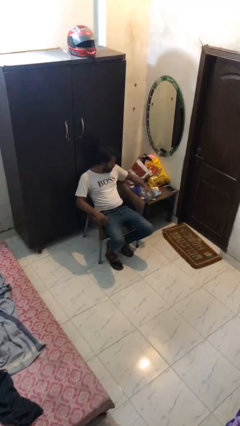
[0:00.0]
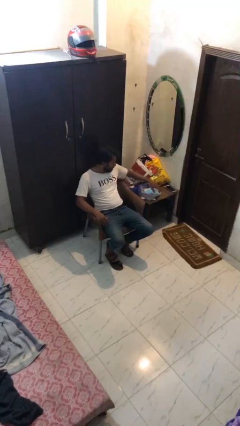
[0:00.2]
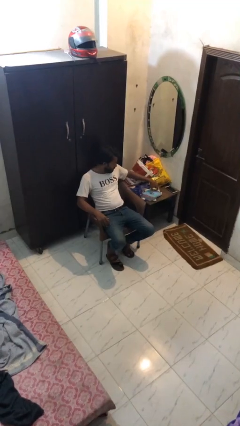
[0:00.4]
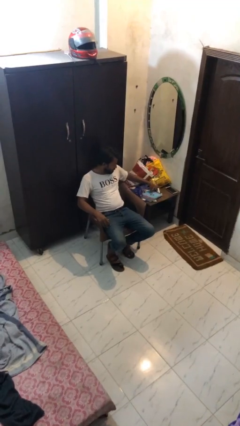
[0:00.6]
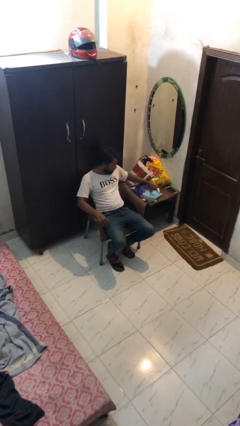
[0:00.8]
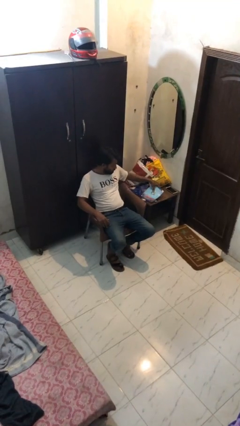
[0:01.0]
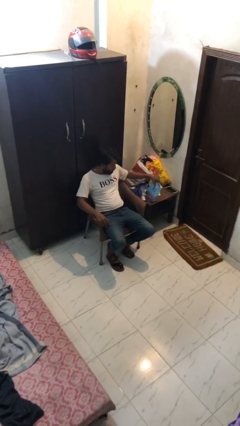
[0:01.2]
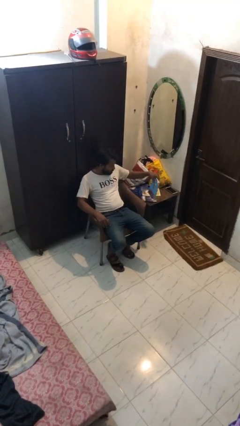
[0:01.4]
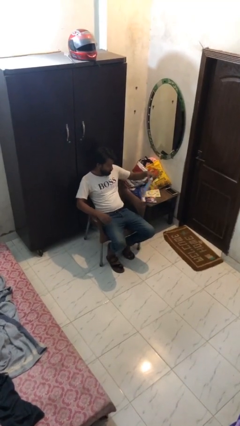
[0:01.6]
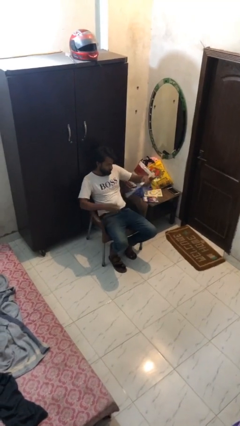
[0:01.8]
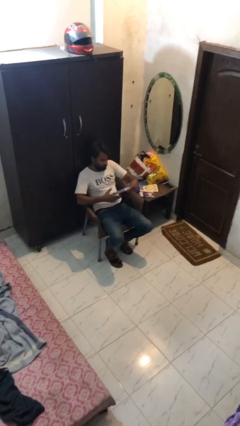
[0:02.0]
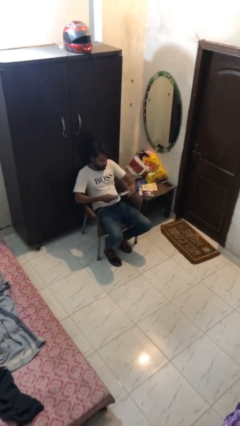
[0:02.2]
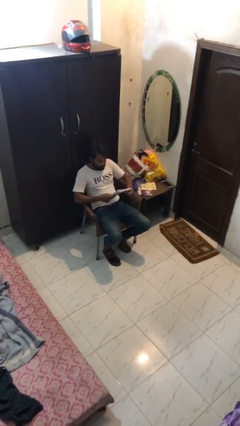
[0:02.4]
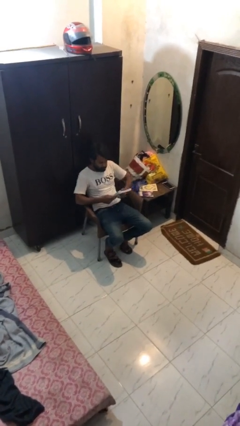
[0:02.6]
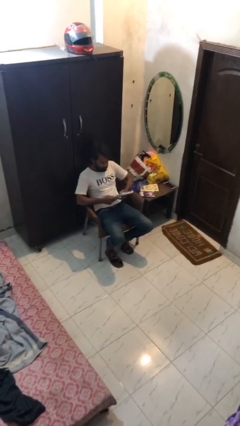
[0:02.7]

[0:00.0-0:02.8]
person picks up object from table

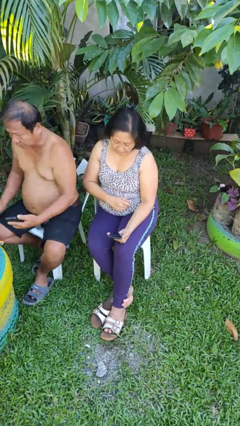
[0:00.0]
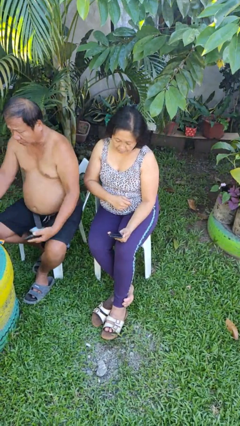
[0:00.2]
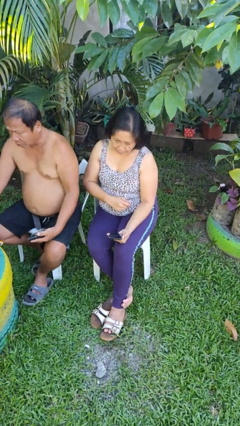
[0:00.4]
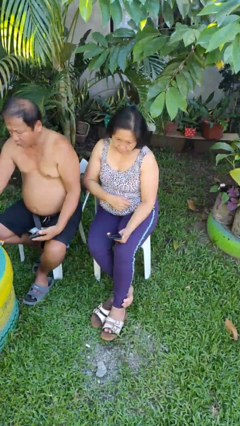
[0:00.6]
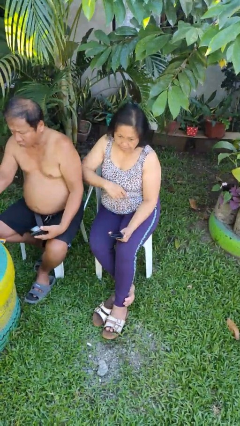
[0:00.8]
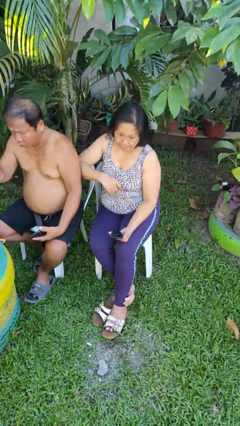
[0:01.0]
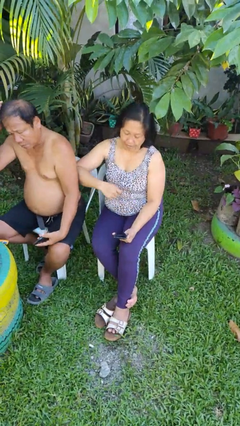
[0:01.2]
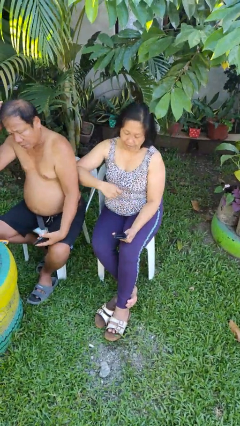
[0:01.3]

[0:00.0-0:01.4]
person nudges person with elbow

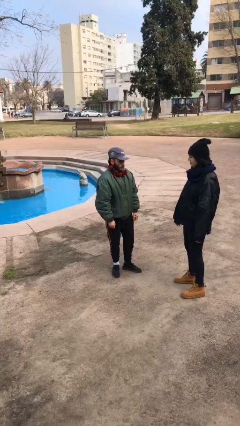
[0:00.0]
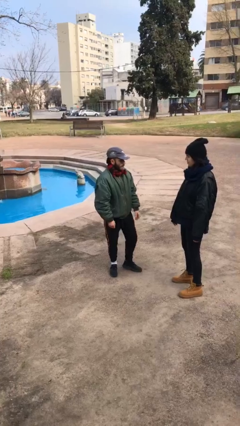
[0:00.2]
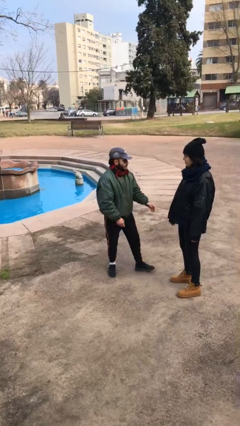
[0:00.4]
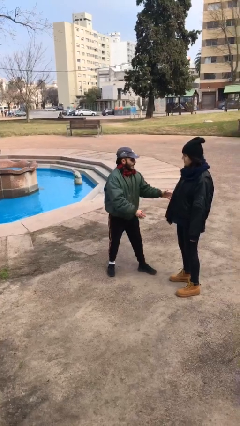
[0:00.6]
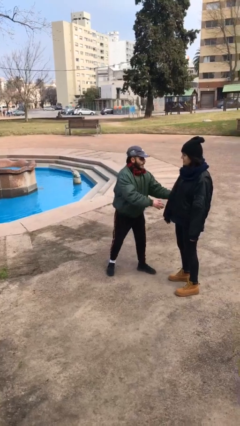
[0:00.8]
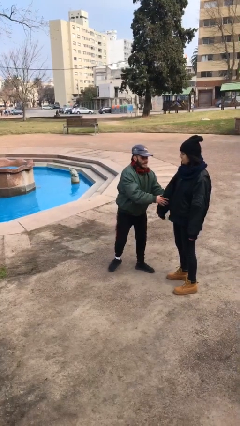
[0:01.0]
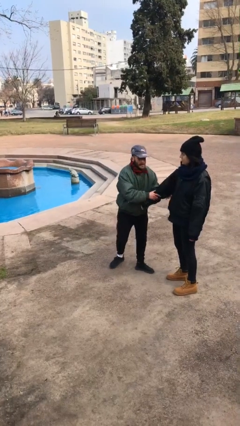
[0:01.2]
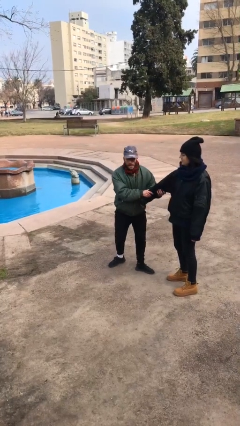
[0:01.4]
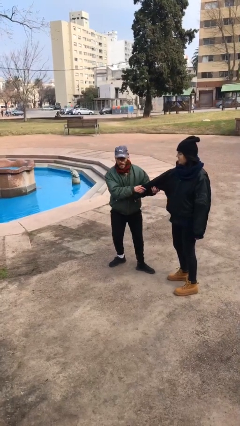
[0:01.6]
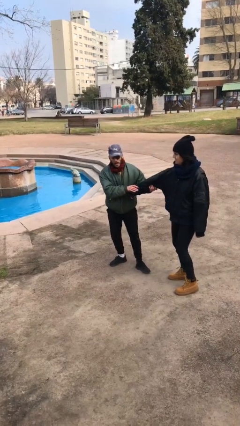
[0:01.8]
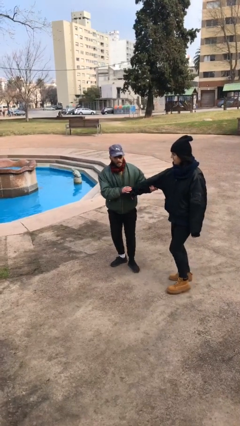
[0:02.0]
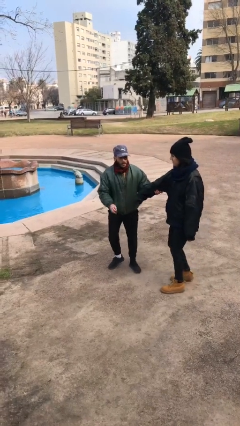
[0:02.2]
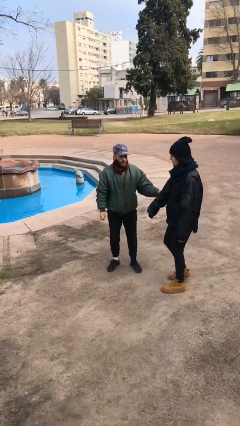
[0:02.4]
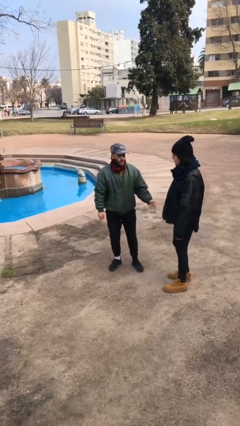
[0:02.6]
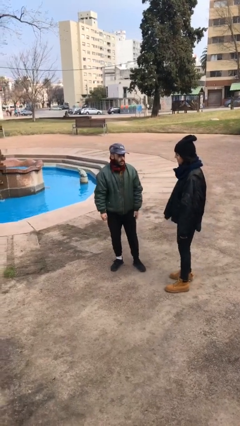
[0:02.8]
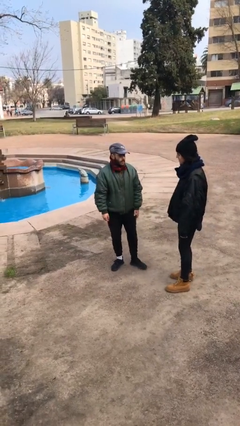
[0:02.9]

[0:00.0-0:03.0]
person grabs person by forearm

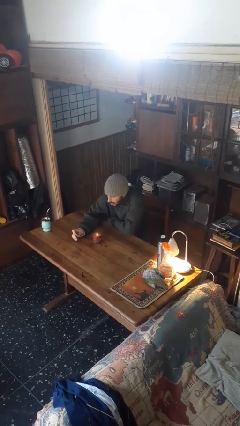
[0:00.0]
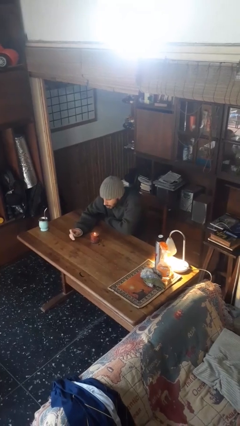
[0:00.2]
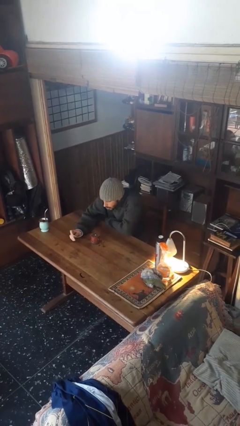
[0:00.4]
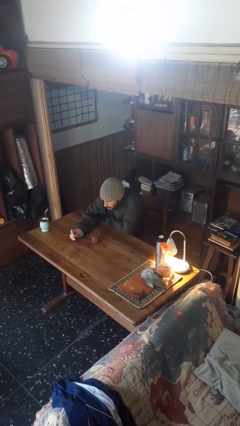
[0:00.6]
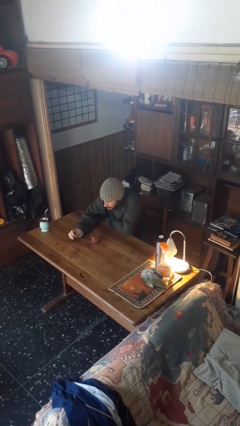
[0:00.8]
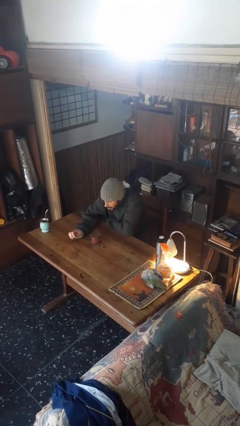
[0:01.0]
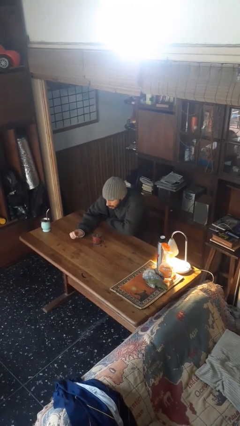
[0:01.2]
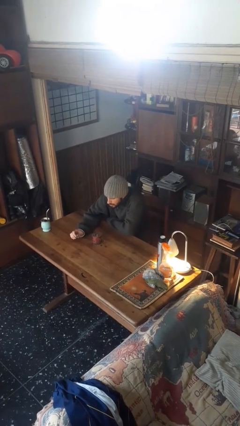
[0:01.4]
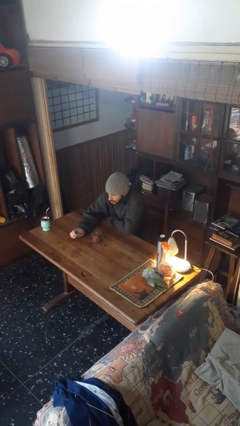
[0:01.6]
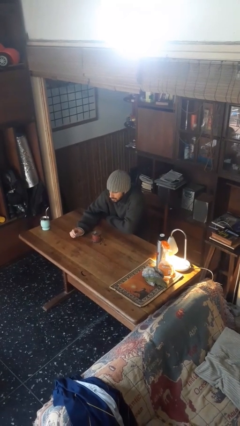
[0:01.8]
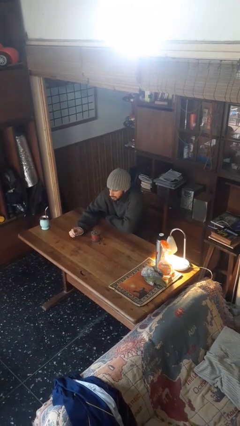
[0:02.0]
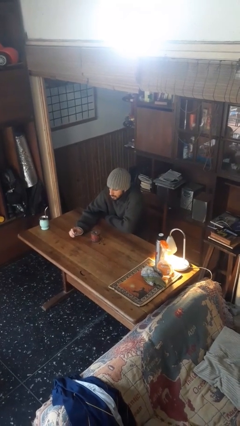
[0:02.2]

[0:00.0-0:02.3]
person extinguishes candle

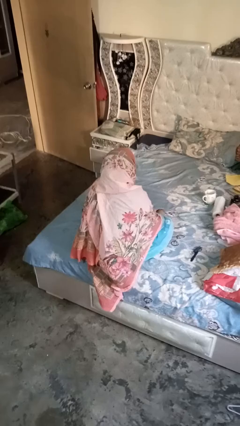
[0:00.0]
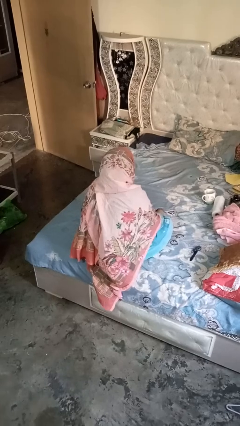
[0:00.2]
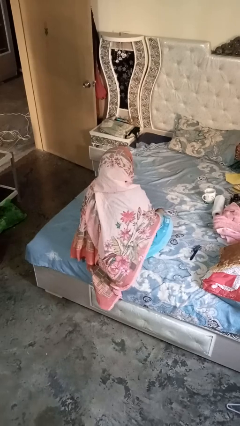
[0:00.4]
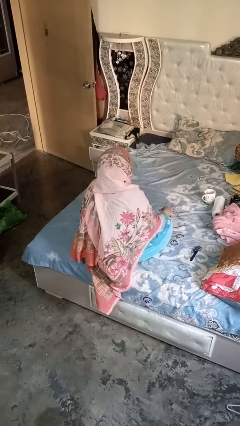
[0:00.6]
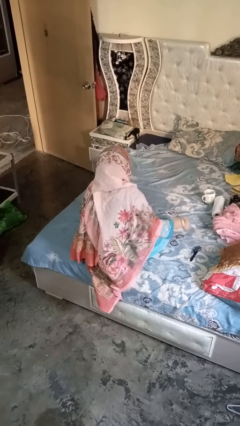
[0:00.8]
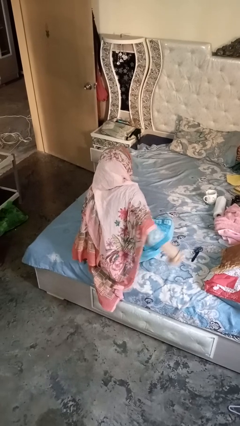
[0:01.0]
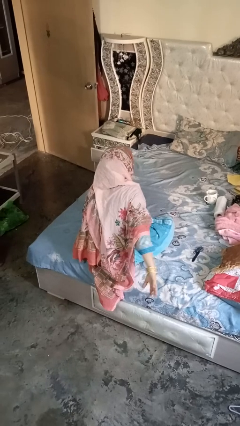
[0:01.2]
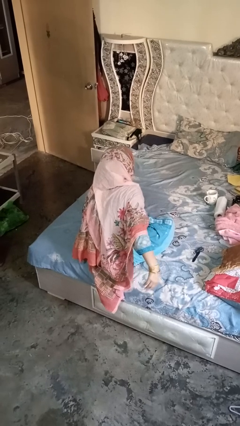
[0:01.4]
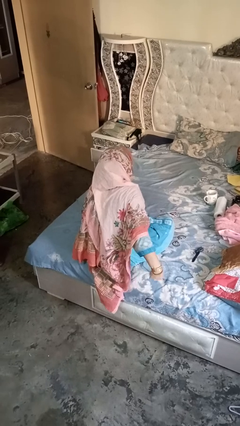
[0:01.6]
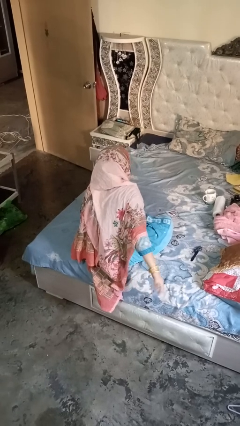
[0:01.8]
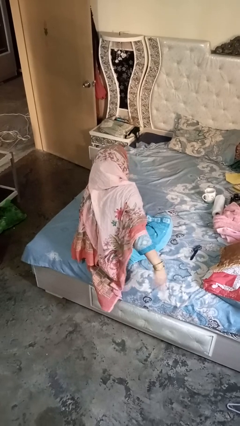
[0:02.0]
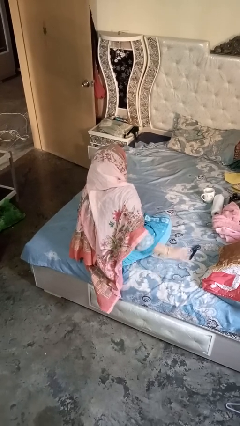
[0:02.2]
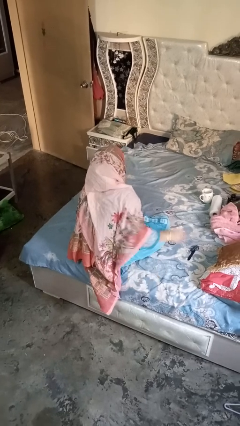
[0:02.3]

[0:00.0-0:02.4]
person gestures behind me

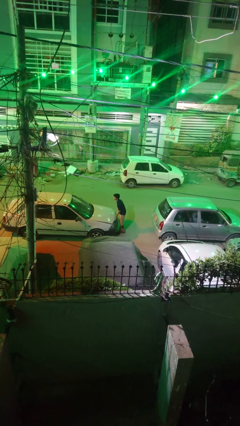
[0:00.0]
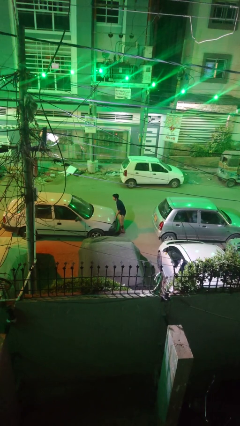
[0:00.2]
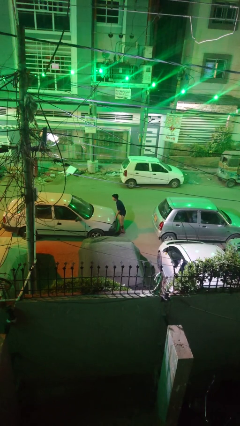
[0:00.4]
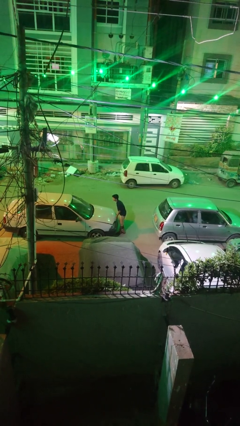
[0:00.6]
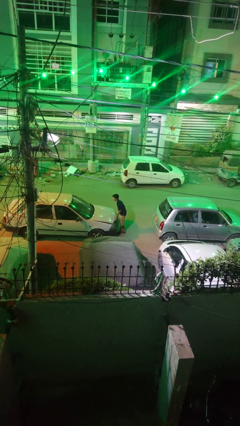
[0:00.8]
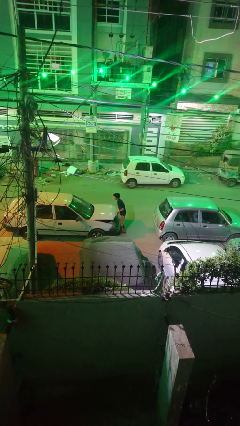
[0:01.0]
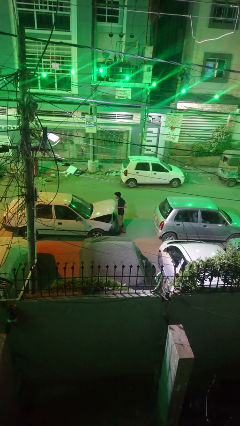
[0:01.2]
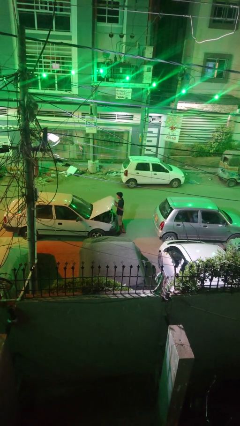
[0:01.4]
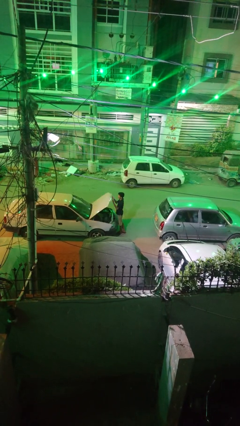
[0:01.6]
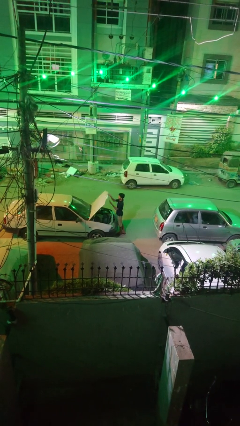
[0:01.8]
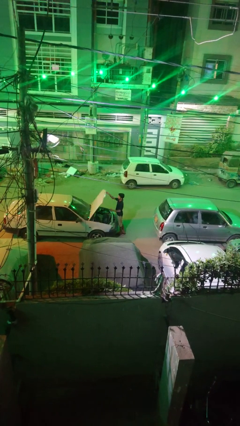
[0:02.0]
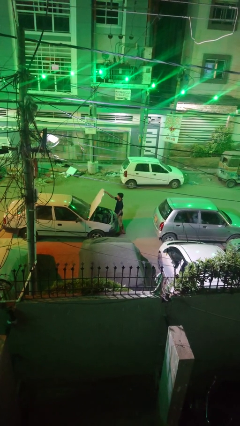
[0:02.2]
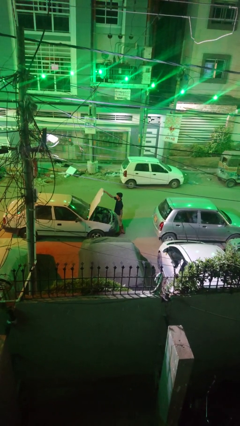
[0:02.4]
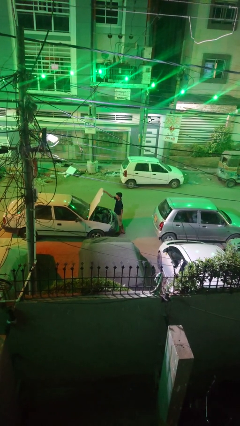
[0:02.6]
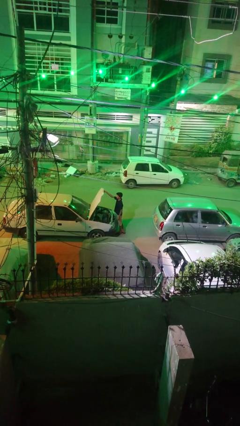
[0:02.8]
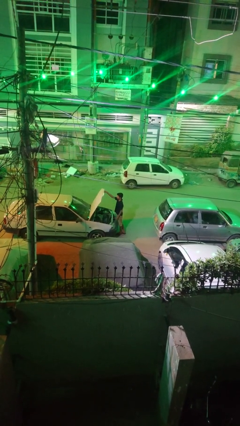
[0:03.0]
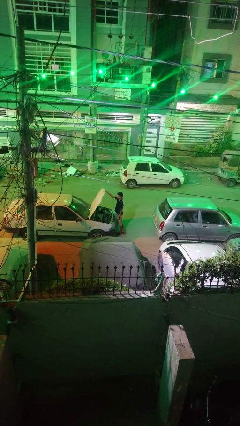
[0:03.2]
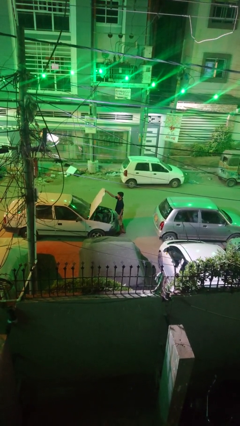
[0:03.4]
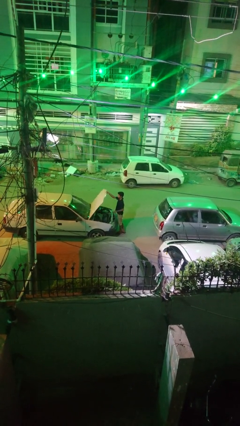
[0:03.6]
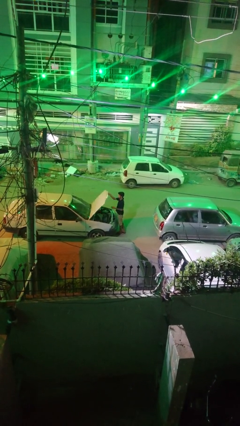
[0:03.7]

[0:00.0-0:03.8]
person opens car hood

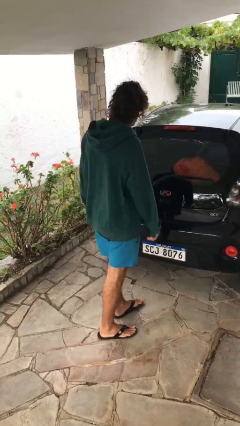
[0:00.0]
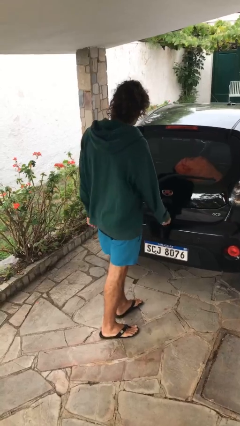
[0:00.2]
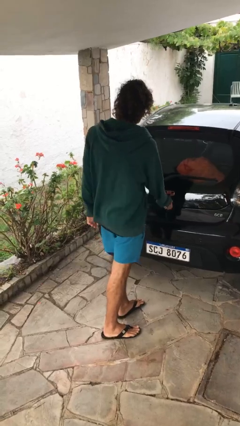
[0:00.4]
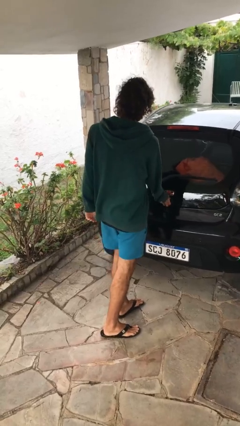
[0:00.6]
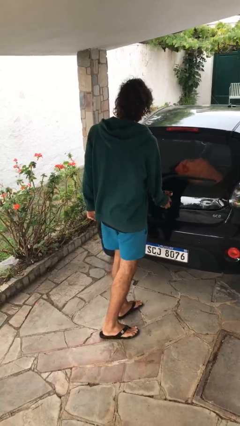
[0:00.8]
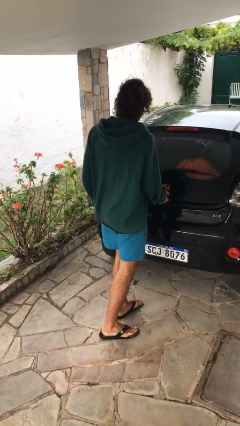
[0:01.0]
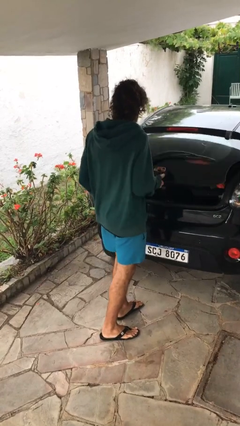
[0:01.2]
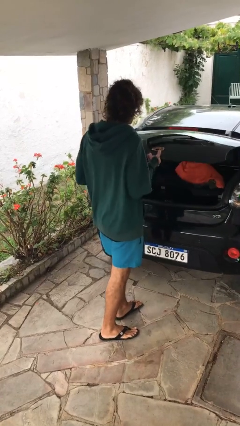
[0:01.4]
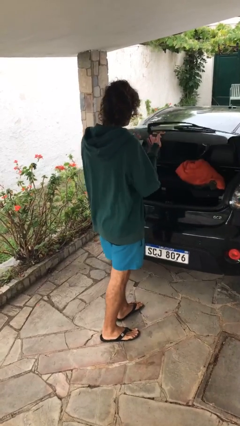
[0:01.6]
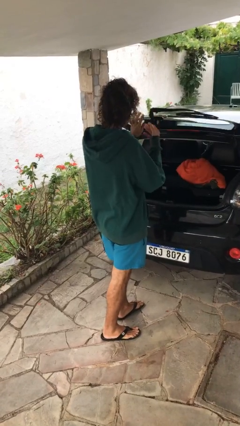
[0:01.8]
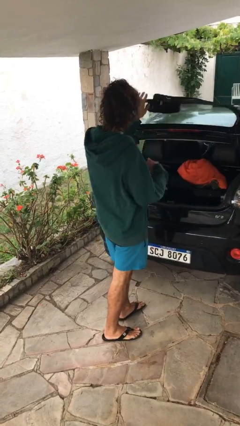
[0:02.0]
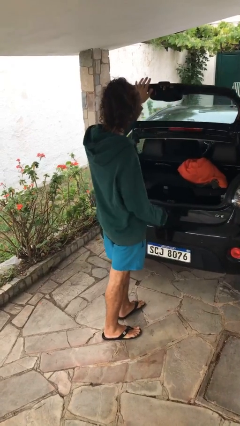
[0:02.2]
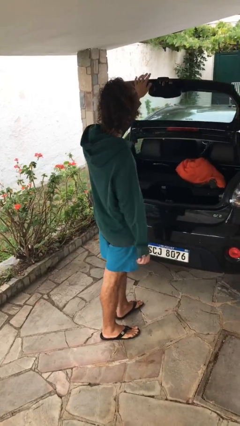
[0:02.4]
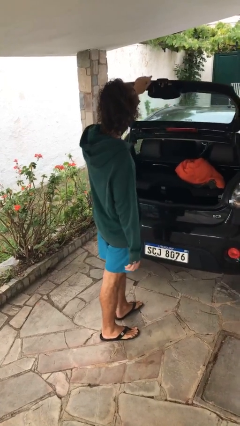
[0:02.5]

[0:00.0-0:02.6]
person opens car trunk
